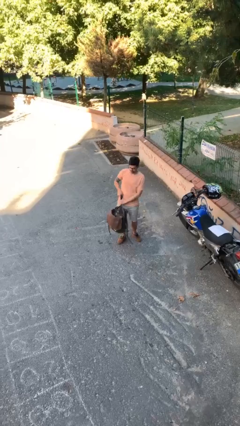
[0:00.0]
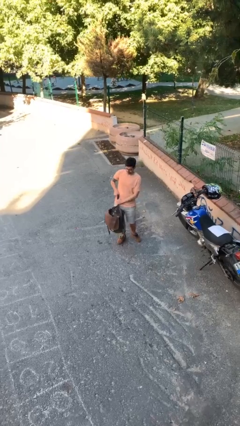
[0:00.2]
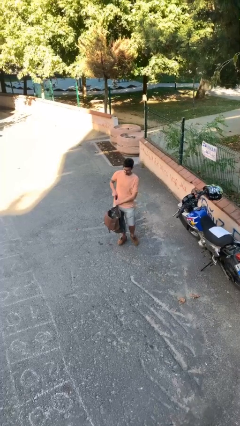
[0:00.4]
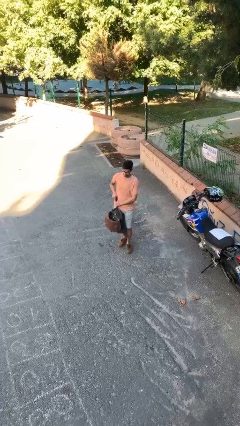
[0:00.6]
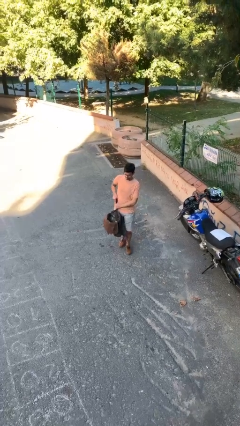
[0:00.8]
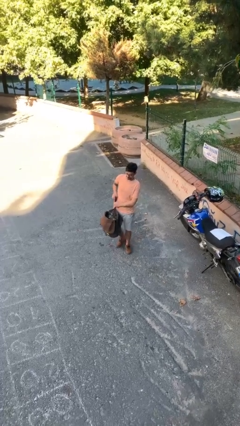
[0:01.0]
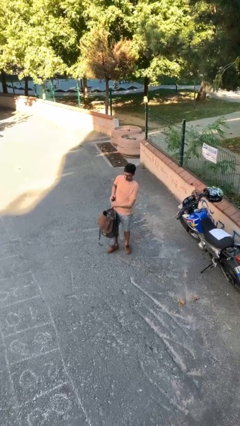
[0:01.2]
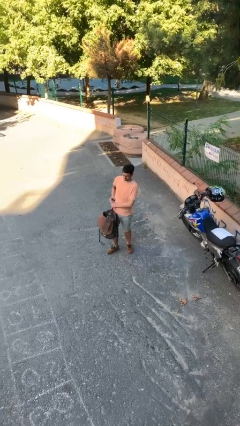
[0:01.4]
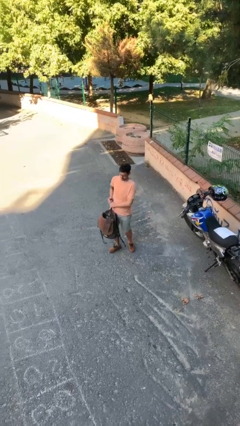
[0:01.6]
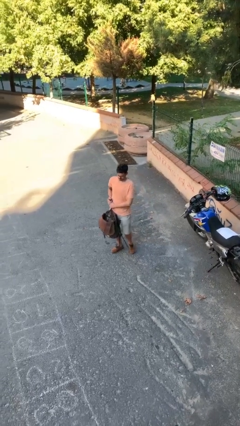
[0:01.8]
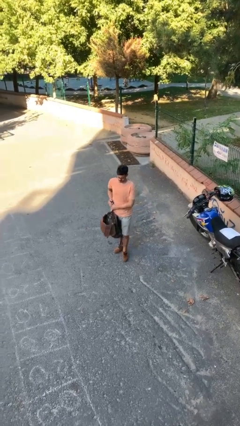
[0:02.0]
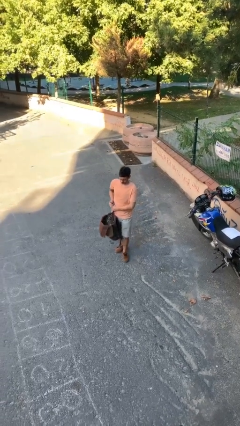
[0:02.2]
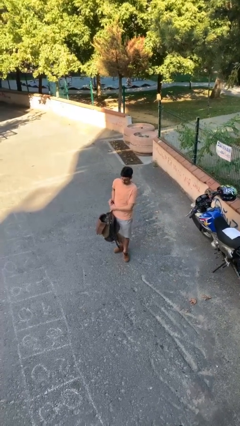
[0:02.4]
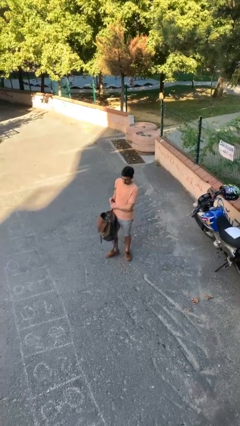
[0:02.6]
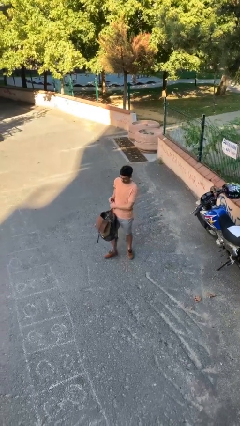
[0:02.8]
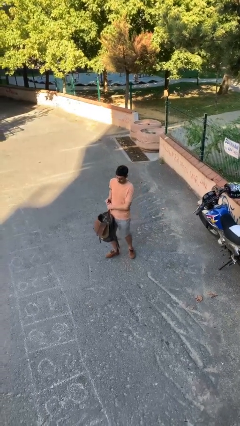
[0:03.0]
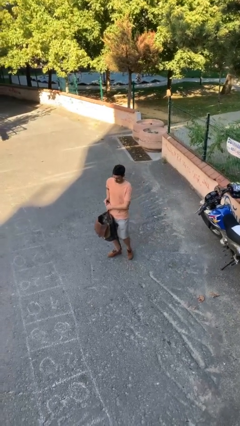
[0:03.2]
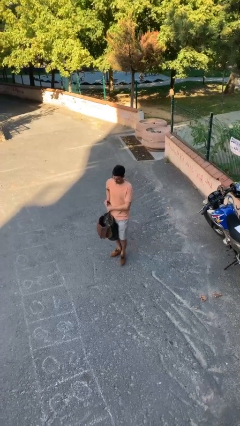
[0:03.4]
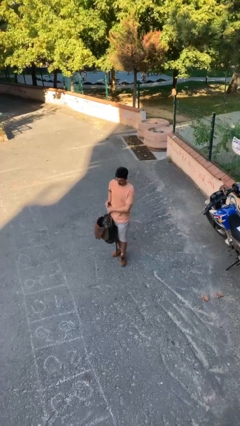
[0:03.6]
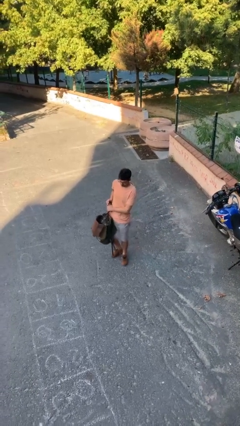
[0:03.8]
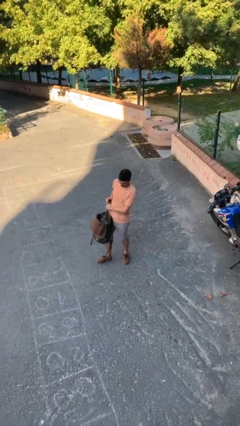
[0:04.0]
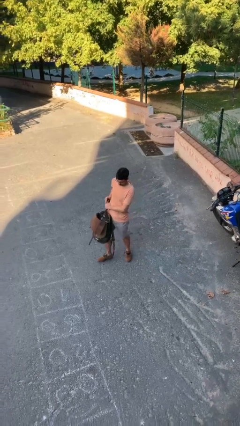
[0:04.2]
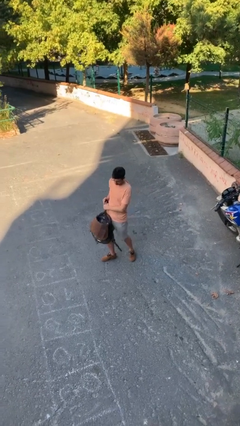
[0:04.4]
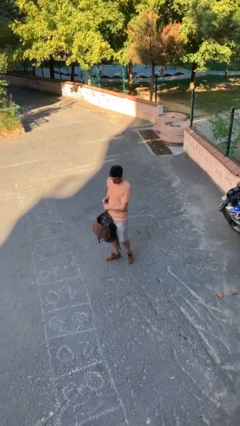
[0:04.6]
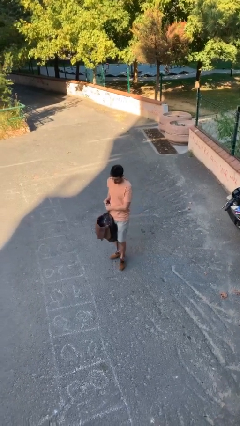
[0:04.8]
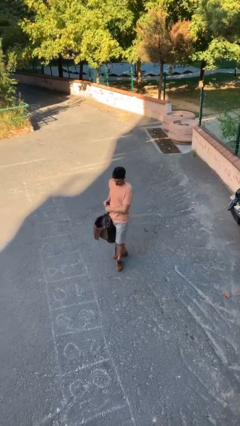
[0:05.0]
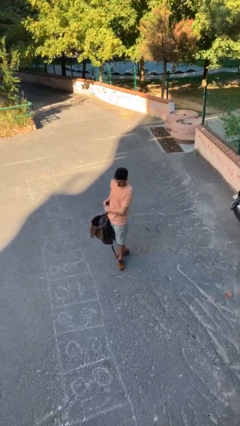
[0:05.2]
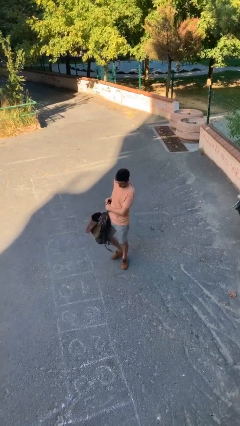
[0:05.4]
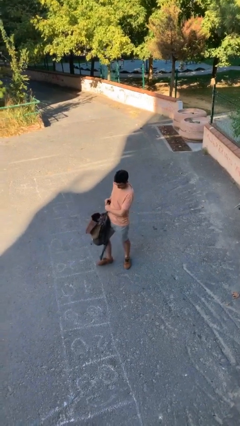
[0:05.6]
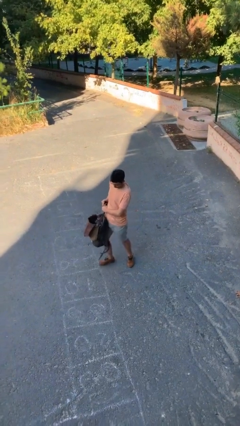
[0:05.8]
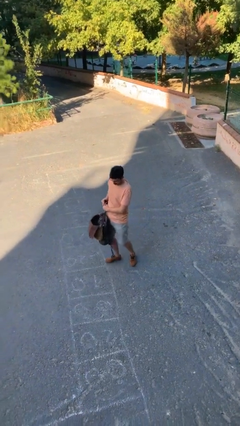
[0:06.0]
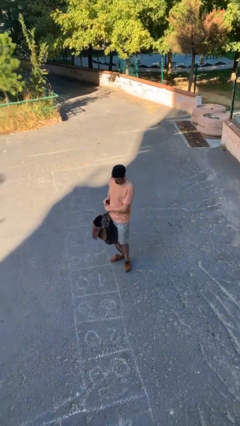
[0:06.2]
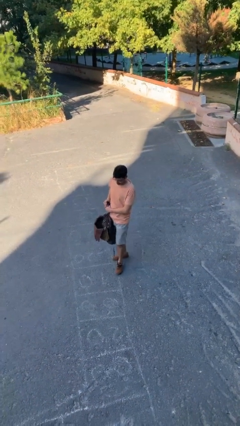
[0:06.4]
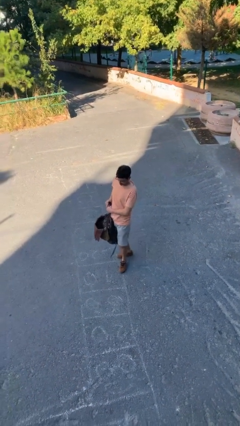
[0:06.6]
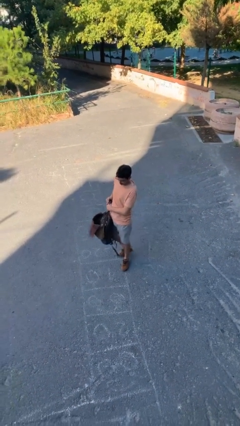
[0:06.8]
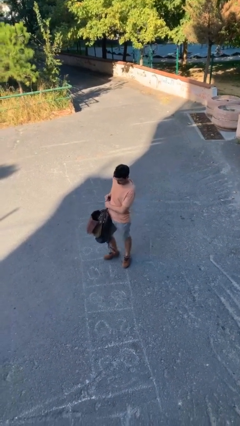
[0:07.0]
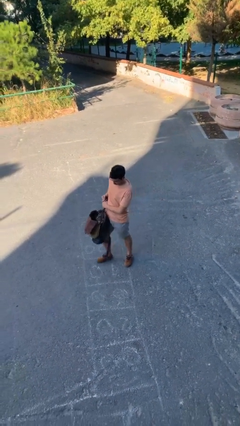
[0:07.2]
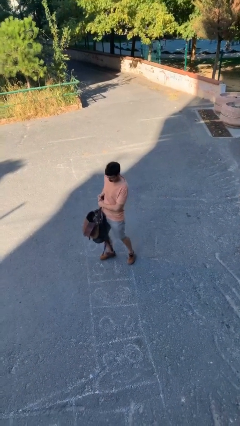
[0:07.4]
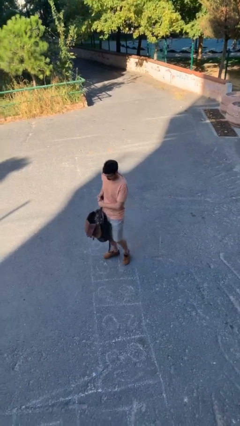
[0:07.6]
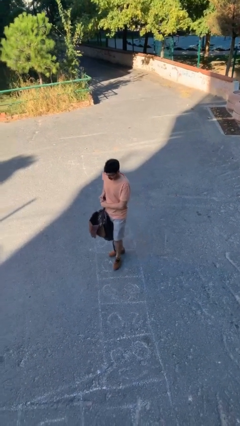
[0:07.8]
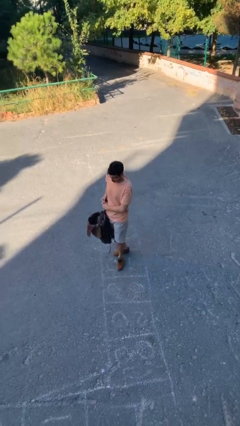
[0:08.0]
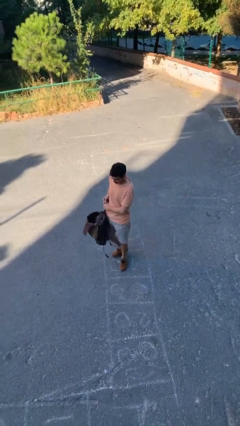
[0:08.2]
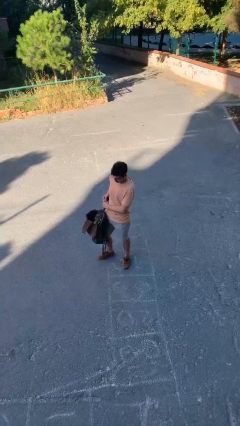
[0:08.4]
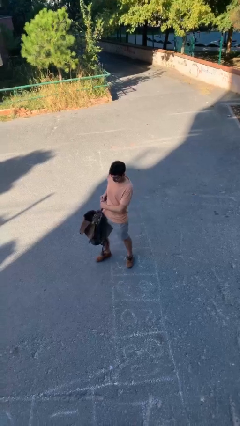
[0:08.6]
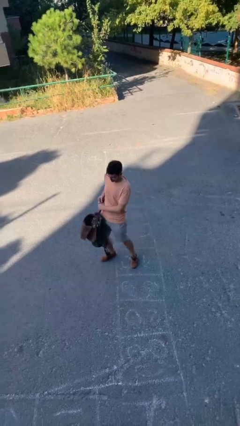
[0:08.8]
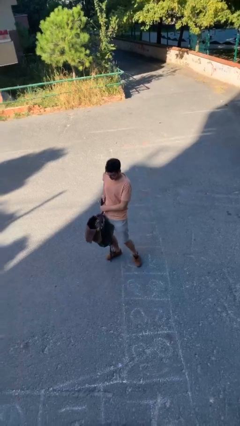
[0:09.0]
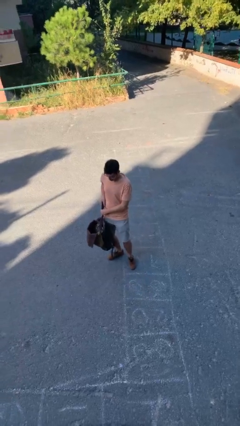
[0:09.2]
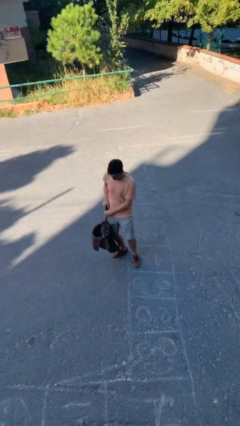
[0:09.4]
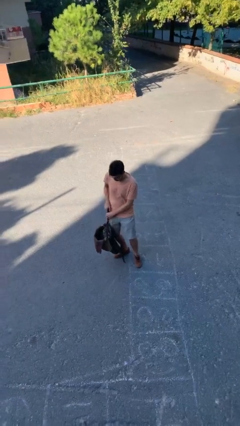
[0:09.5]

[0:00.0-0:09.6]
person carries heavy object

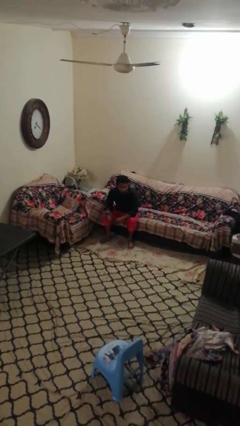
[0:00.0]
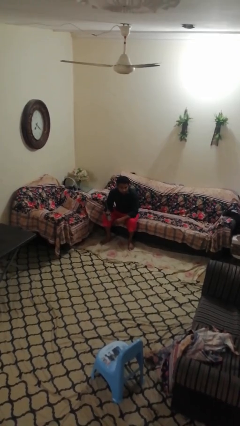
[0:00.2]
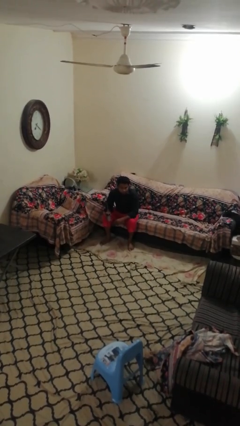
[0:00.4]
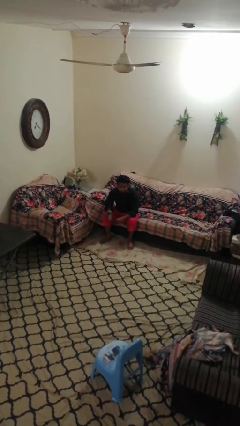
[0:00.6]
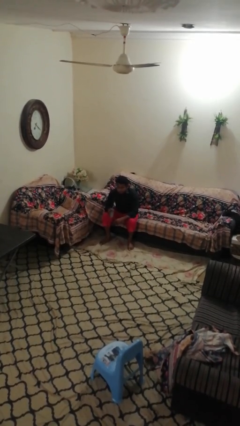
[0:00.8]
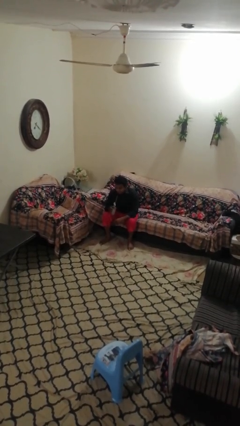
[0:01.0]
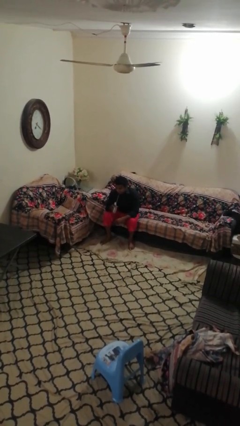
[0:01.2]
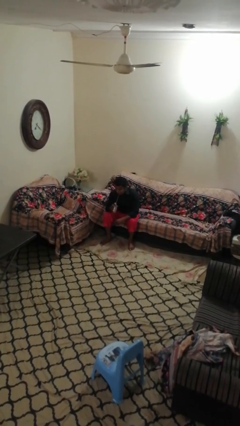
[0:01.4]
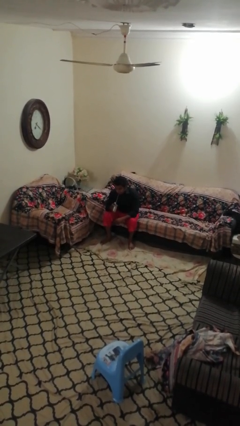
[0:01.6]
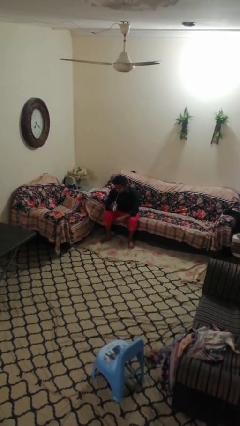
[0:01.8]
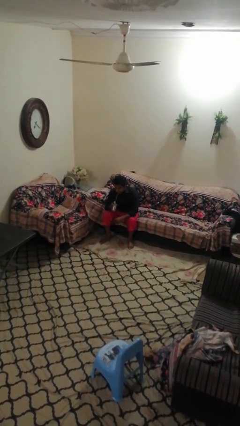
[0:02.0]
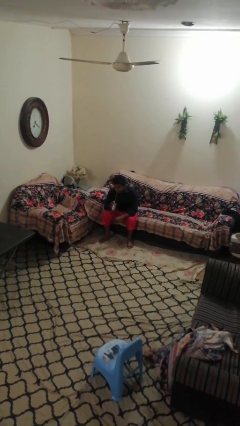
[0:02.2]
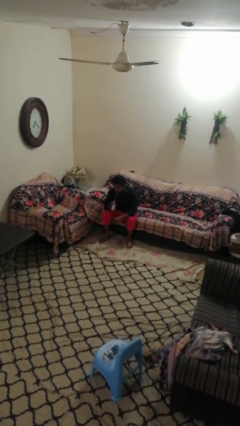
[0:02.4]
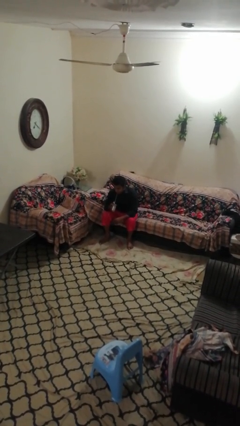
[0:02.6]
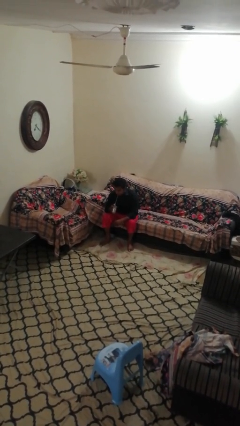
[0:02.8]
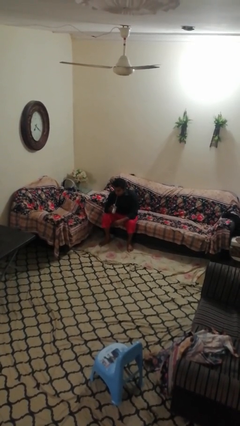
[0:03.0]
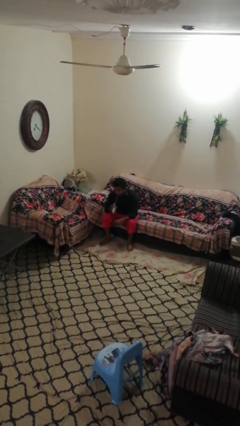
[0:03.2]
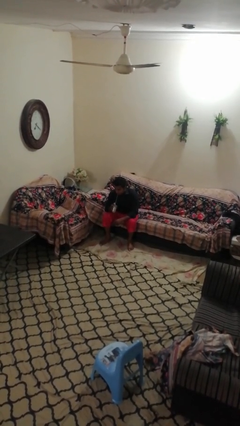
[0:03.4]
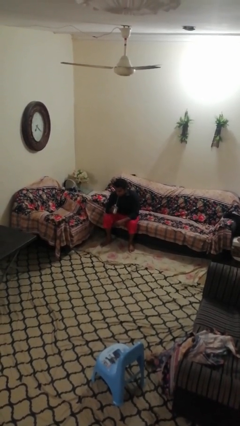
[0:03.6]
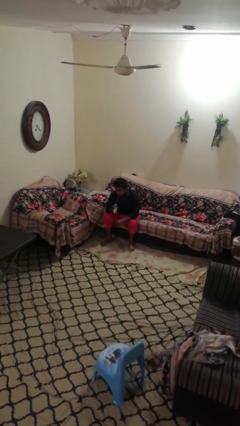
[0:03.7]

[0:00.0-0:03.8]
person drinks from straw

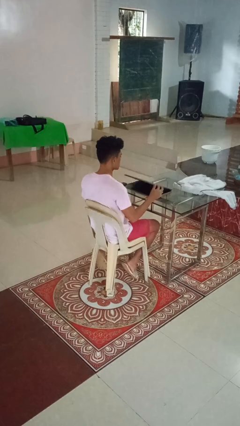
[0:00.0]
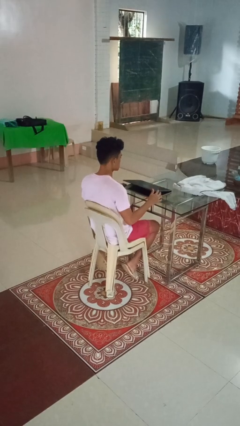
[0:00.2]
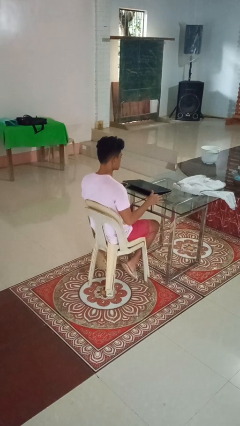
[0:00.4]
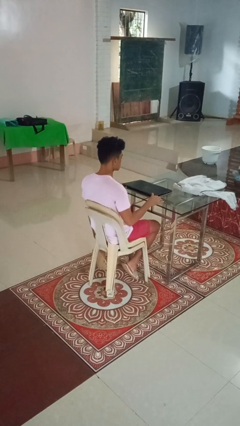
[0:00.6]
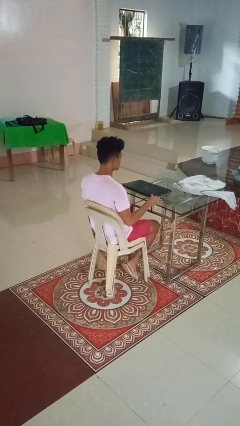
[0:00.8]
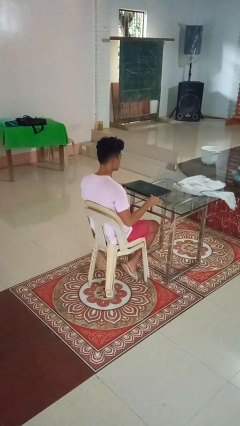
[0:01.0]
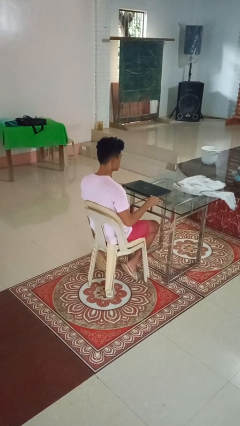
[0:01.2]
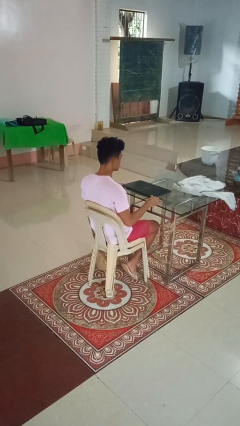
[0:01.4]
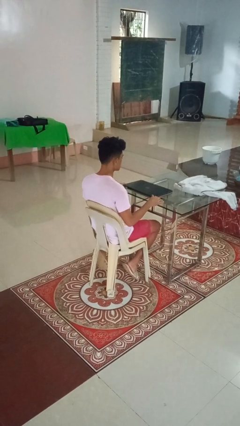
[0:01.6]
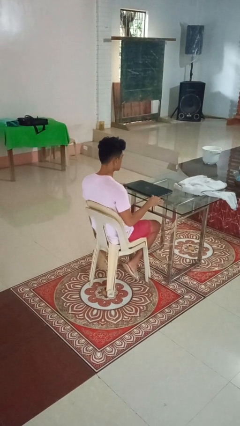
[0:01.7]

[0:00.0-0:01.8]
person closes laptop

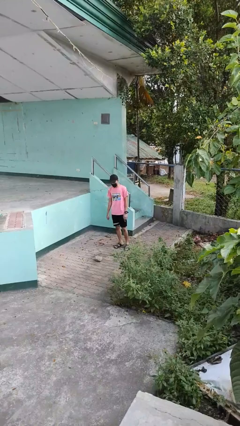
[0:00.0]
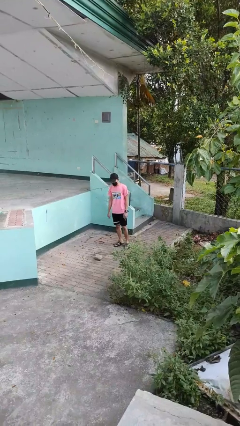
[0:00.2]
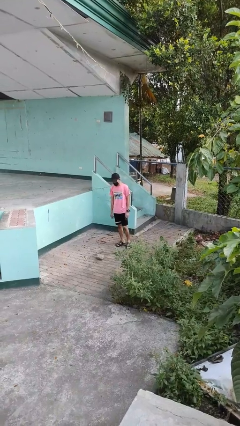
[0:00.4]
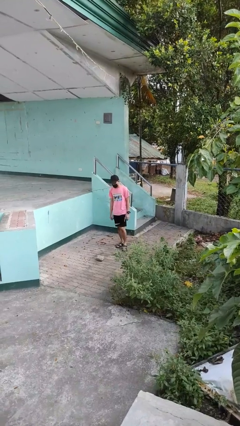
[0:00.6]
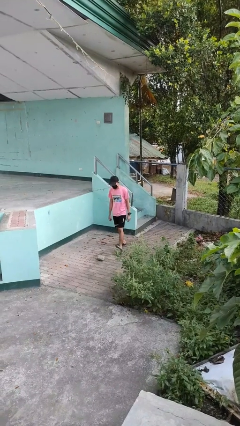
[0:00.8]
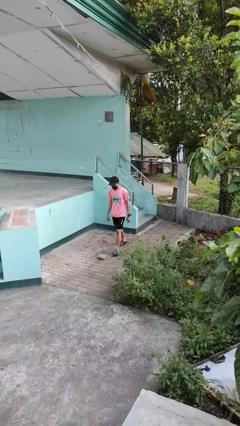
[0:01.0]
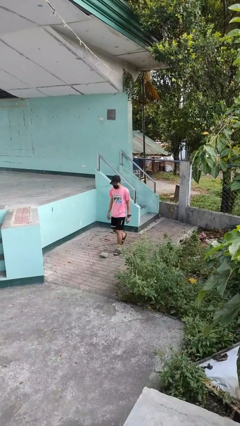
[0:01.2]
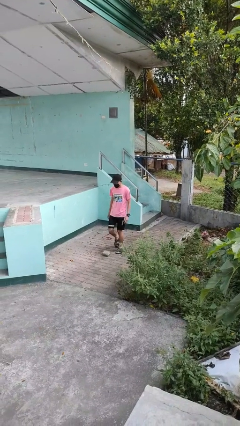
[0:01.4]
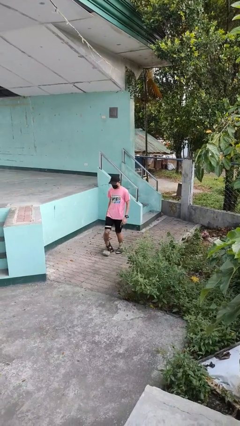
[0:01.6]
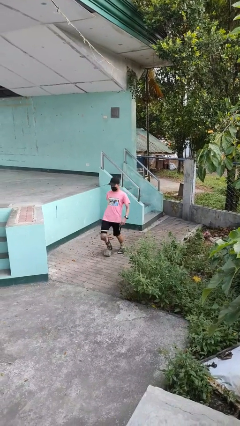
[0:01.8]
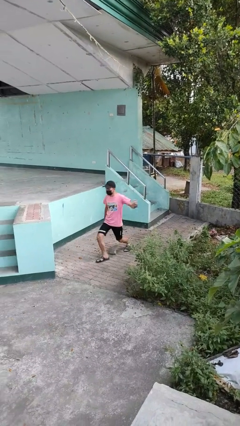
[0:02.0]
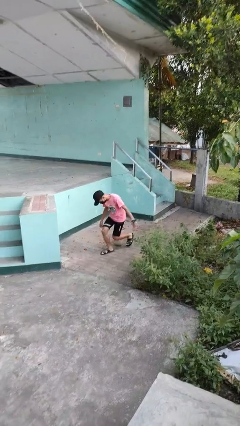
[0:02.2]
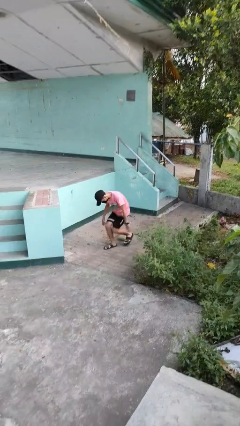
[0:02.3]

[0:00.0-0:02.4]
person trips on object on floor

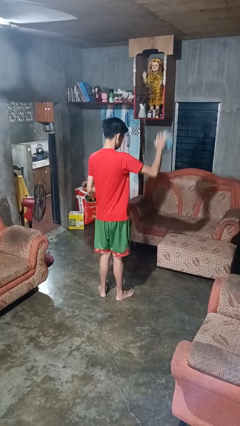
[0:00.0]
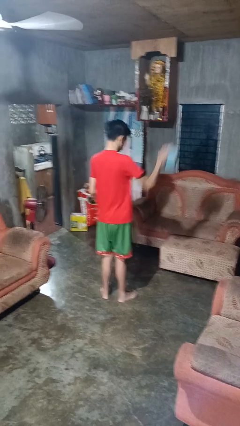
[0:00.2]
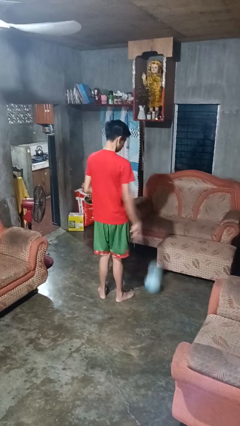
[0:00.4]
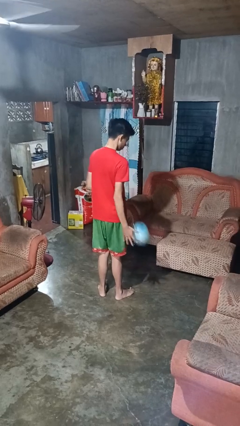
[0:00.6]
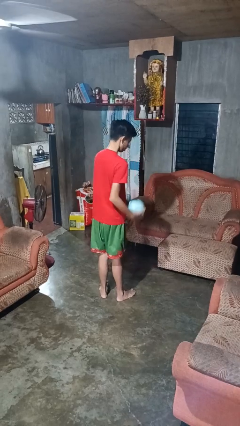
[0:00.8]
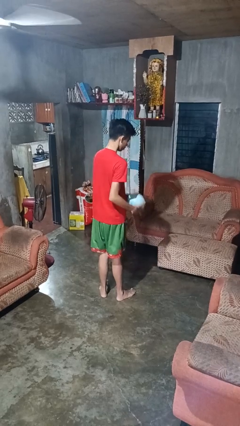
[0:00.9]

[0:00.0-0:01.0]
person bounces ball on floor
